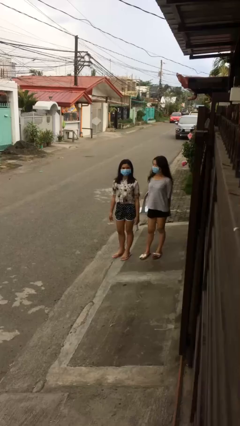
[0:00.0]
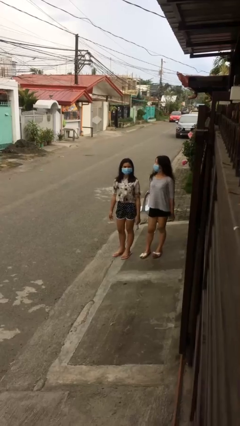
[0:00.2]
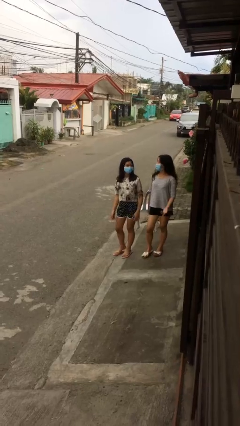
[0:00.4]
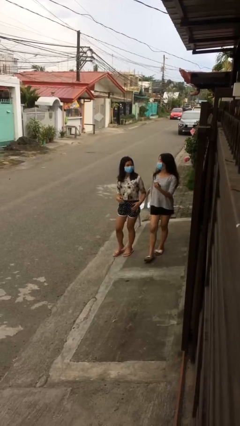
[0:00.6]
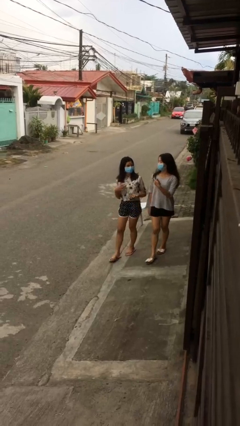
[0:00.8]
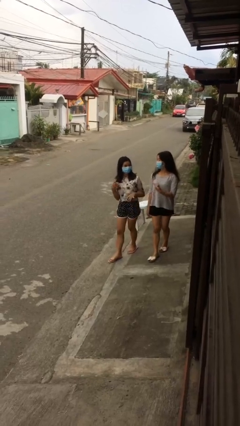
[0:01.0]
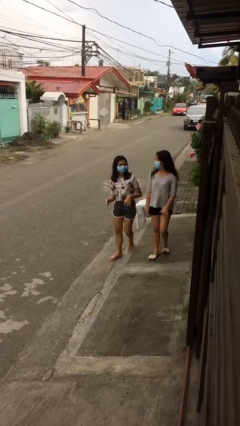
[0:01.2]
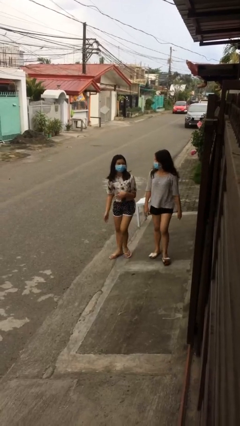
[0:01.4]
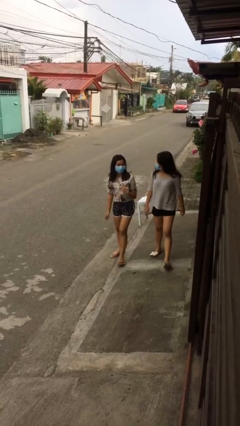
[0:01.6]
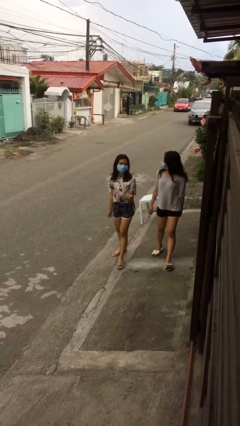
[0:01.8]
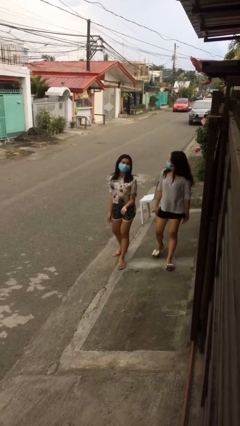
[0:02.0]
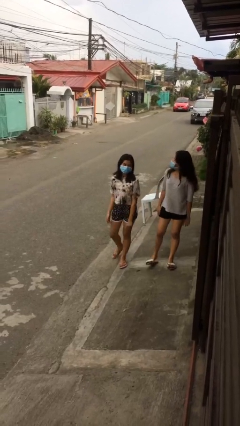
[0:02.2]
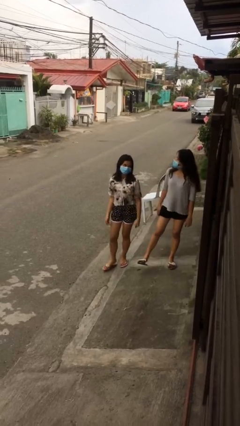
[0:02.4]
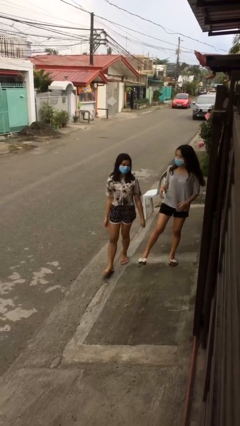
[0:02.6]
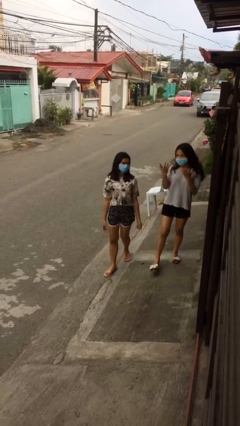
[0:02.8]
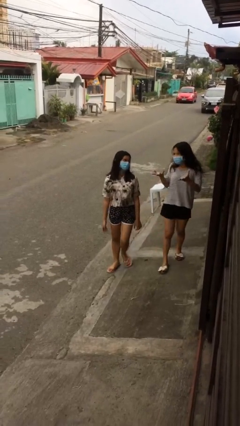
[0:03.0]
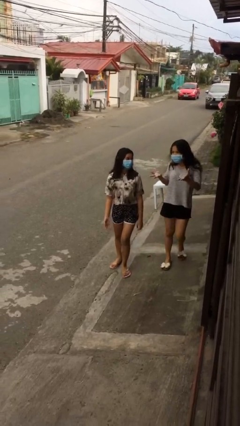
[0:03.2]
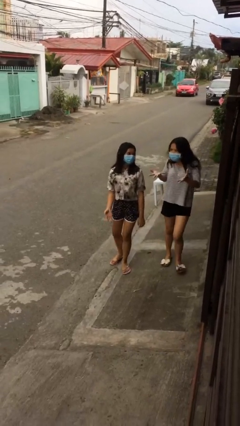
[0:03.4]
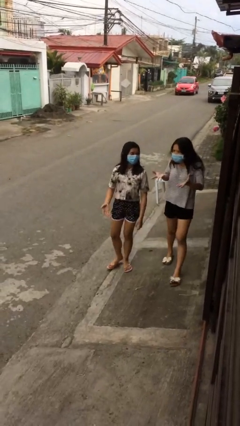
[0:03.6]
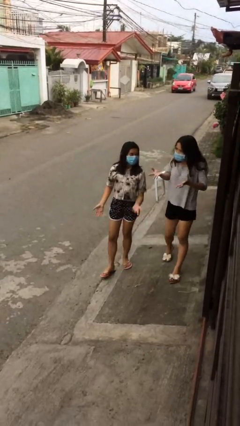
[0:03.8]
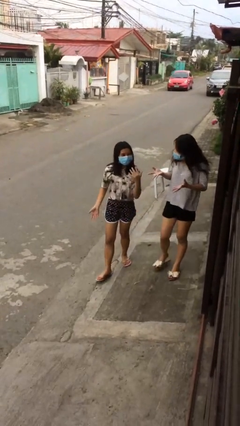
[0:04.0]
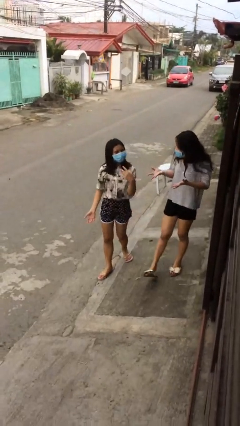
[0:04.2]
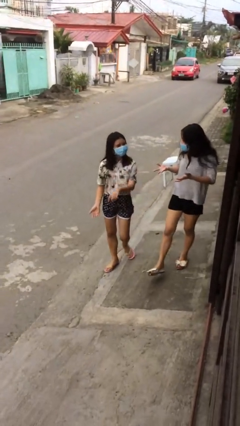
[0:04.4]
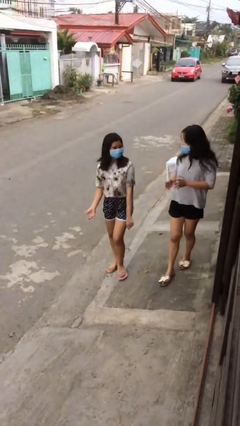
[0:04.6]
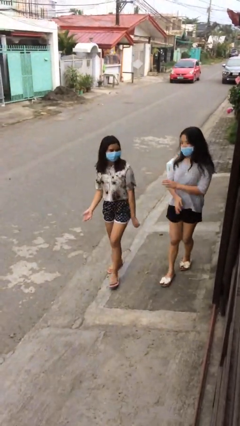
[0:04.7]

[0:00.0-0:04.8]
person talks to person

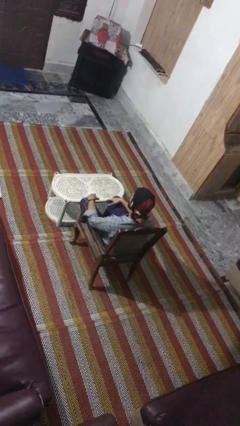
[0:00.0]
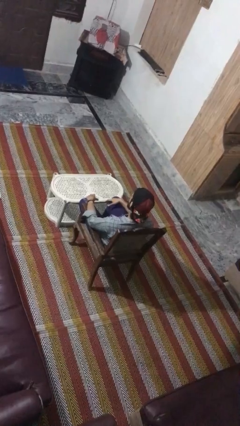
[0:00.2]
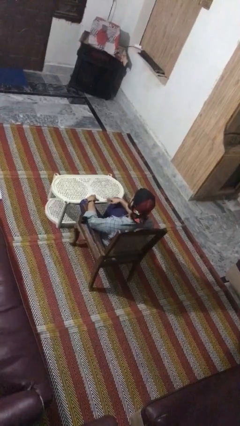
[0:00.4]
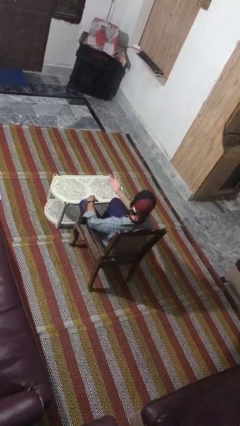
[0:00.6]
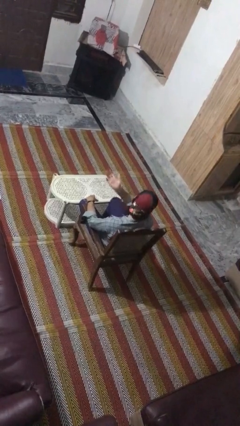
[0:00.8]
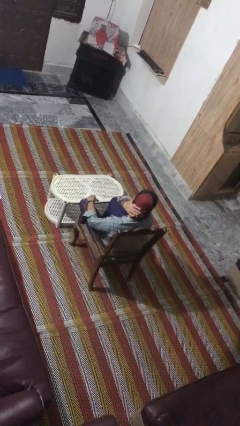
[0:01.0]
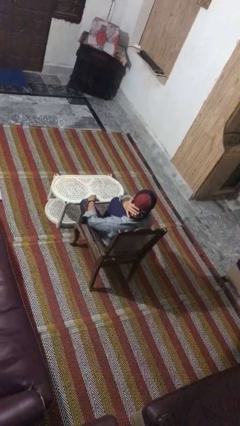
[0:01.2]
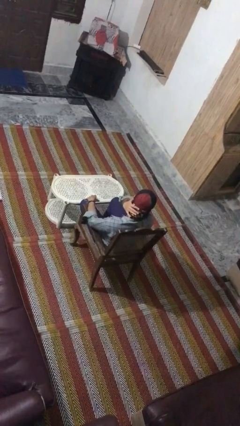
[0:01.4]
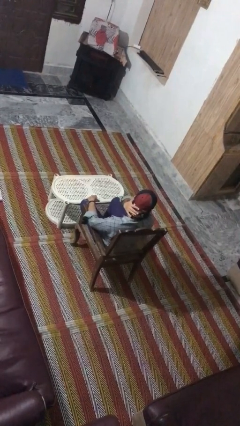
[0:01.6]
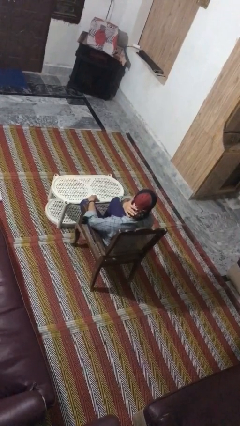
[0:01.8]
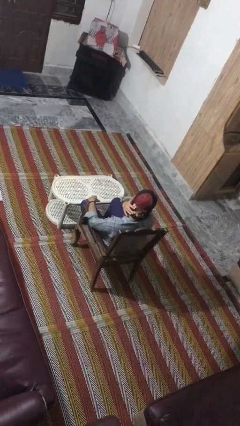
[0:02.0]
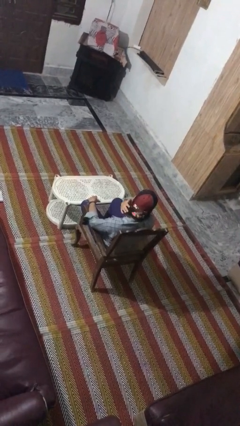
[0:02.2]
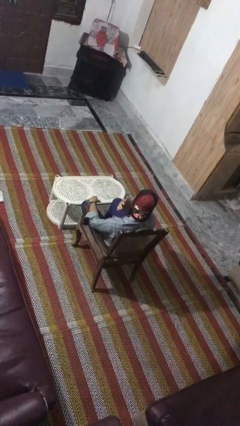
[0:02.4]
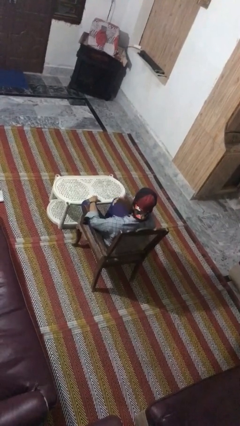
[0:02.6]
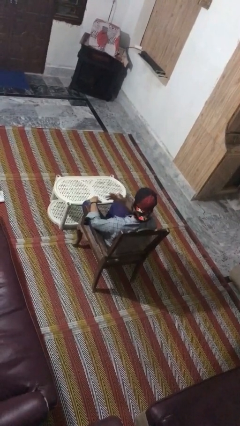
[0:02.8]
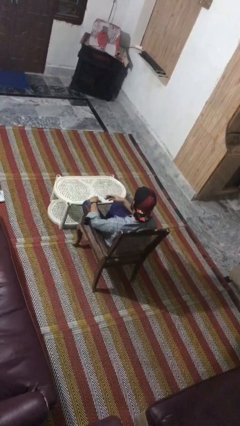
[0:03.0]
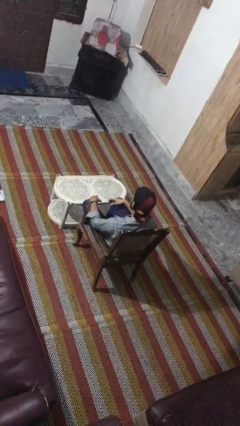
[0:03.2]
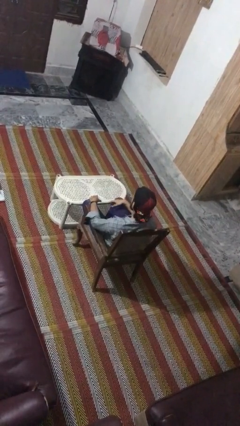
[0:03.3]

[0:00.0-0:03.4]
person swats bug

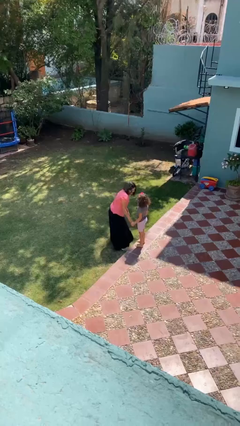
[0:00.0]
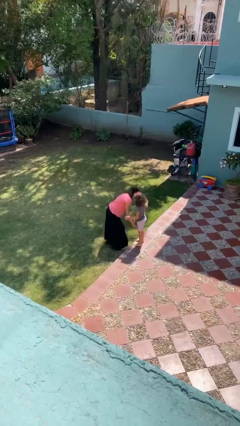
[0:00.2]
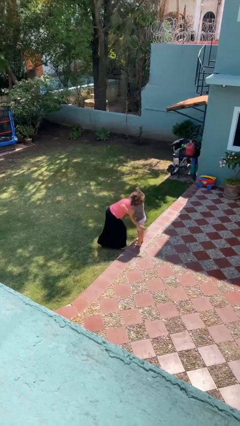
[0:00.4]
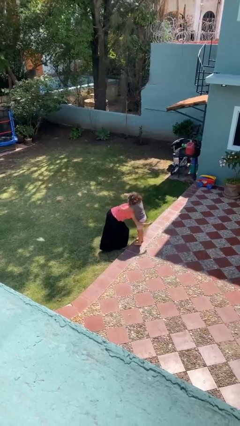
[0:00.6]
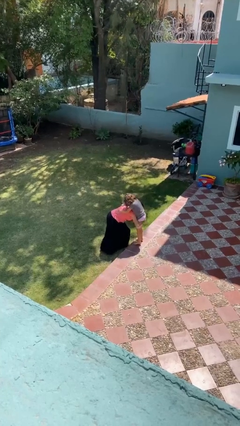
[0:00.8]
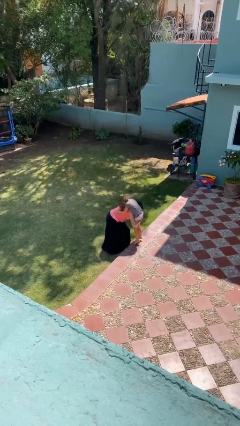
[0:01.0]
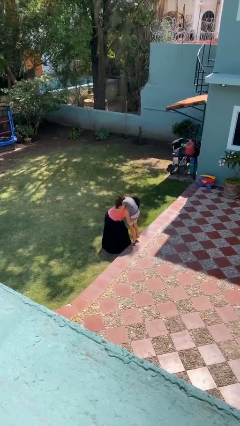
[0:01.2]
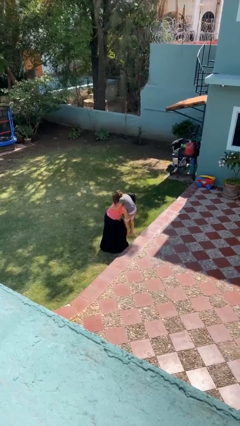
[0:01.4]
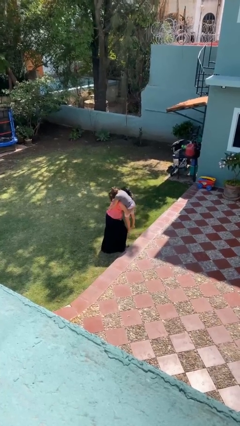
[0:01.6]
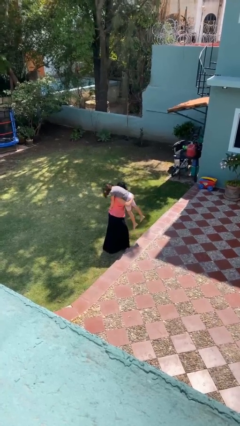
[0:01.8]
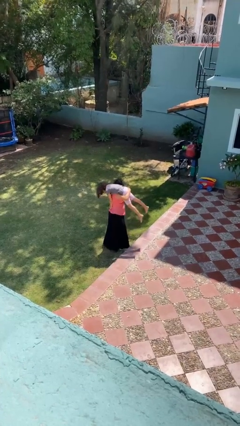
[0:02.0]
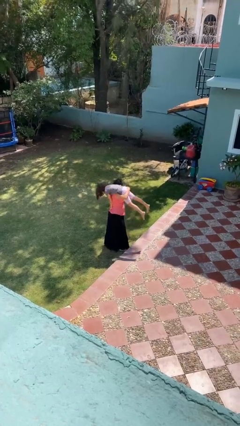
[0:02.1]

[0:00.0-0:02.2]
person carries person over shoulder

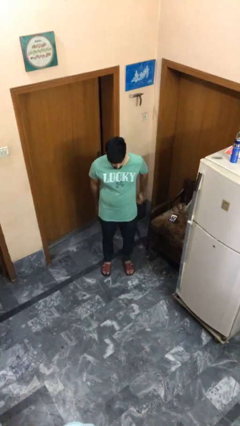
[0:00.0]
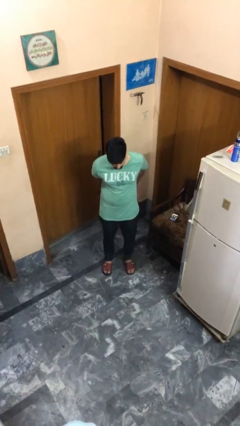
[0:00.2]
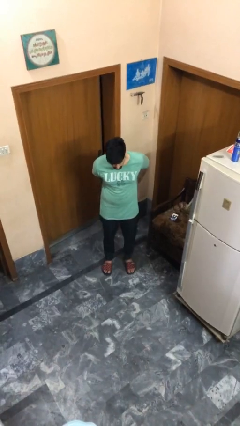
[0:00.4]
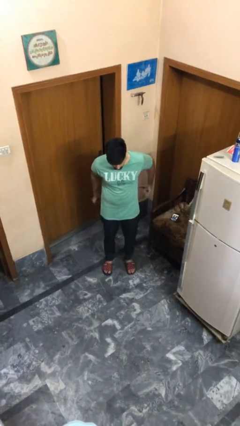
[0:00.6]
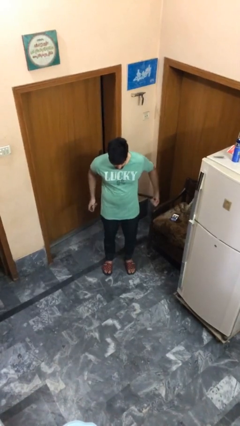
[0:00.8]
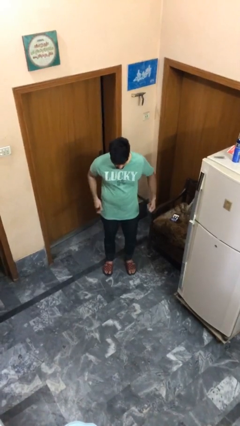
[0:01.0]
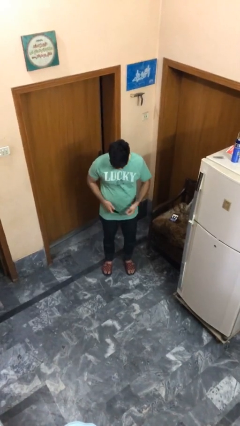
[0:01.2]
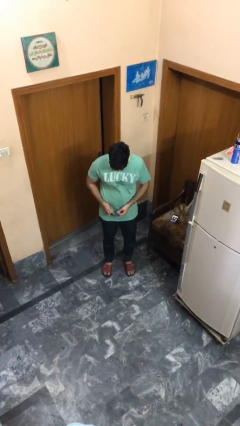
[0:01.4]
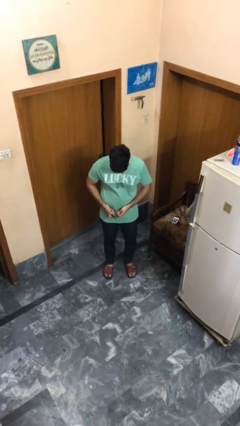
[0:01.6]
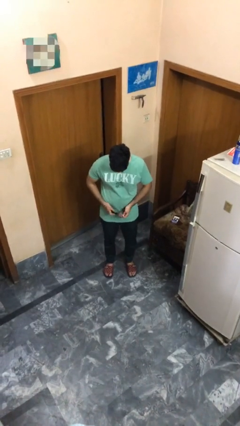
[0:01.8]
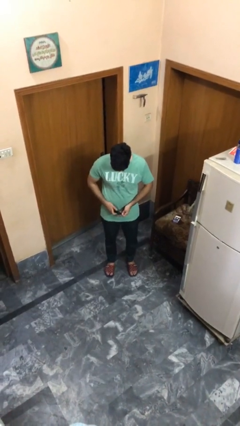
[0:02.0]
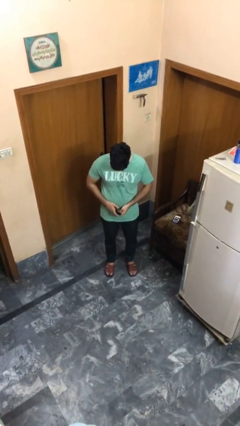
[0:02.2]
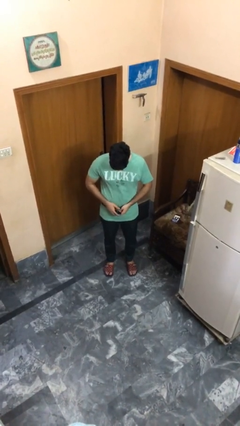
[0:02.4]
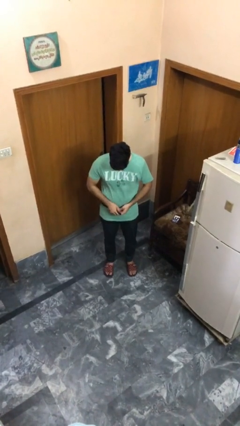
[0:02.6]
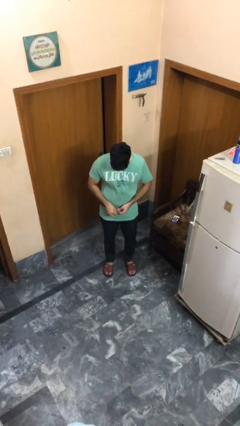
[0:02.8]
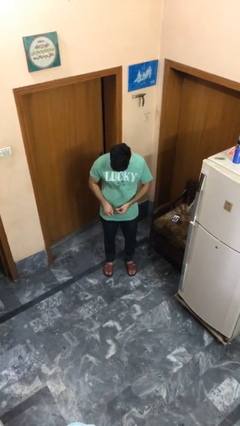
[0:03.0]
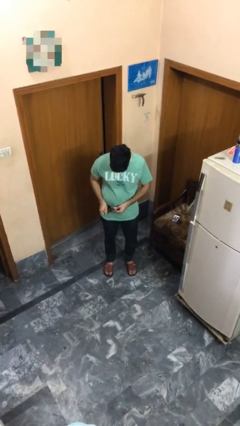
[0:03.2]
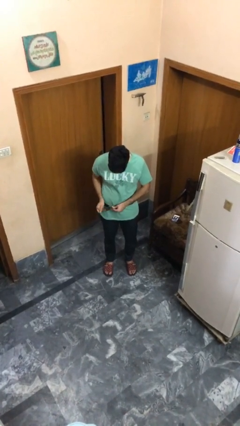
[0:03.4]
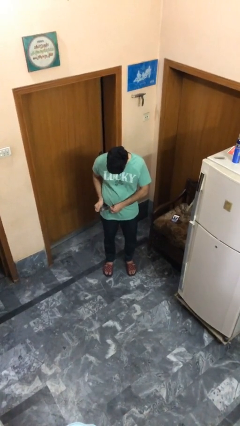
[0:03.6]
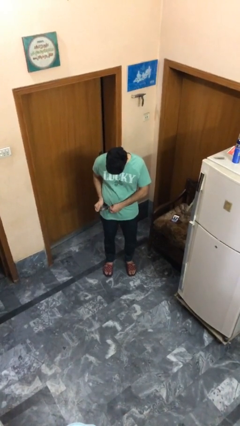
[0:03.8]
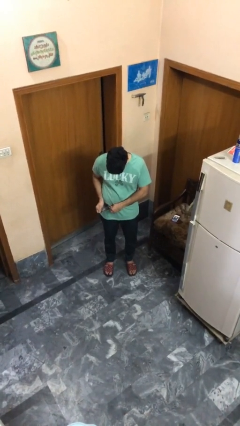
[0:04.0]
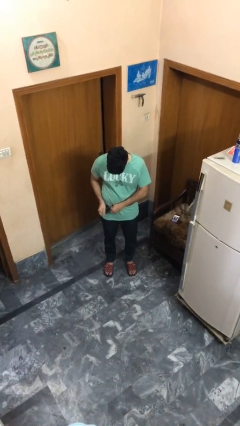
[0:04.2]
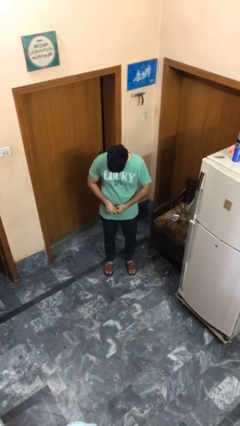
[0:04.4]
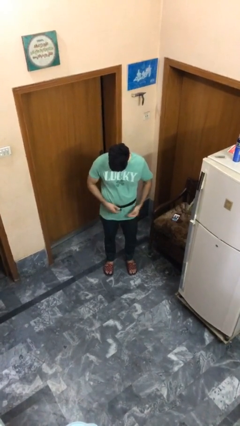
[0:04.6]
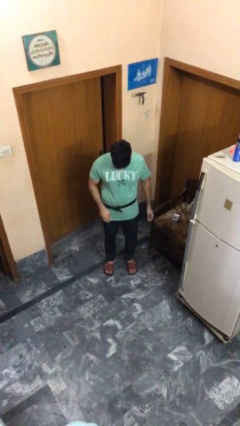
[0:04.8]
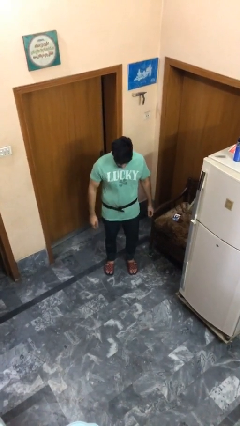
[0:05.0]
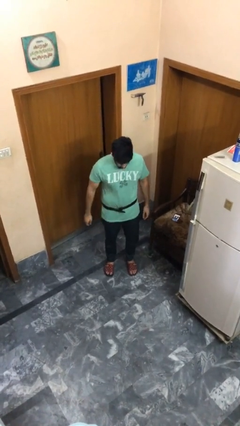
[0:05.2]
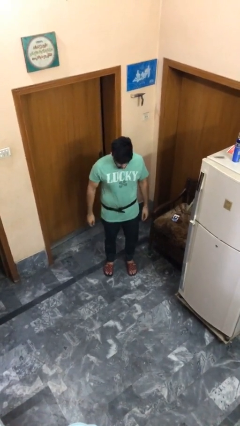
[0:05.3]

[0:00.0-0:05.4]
person puts on belt

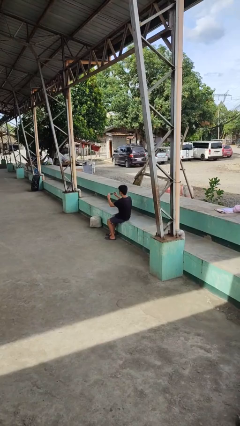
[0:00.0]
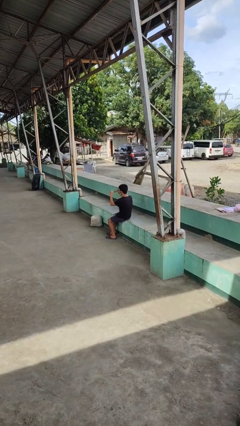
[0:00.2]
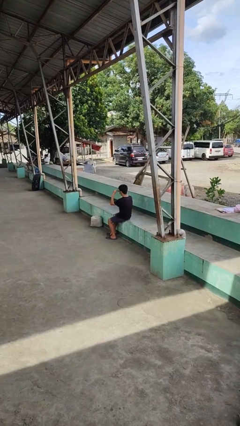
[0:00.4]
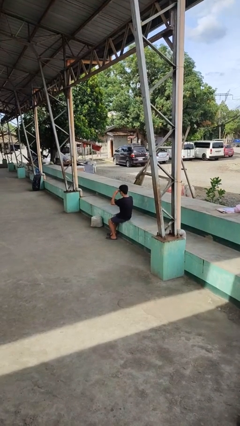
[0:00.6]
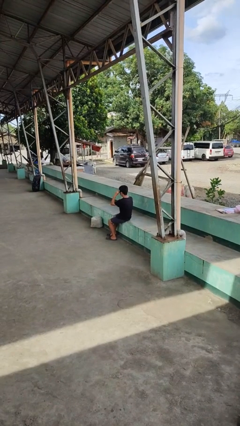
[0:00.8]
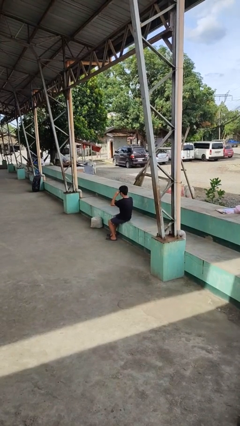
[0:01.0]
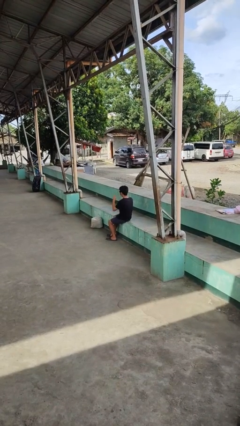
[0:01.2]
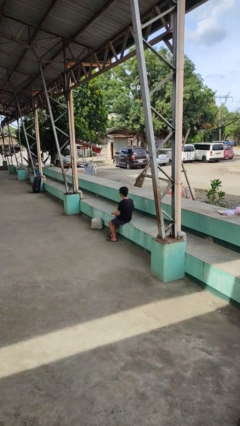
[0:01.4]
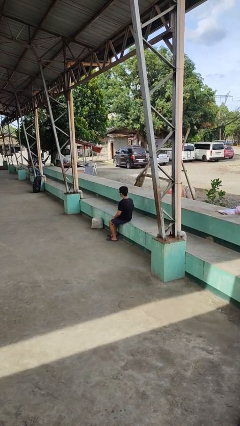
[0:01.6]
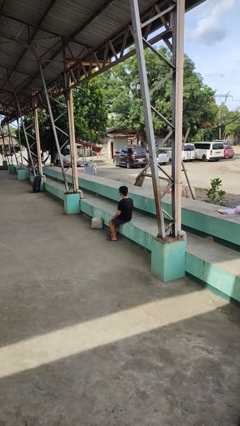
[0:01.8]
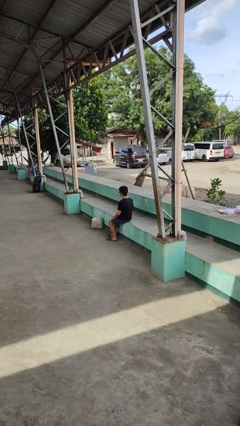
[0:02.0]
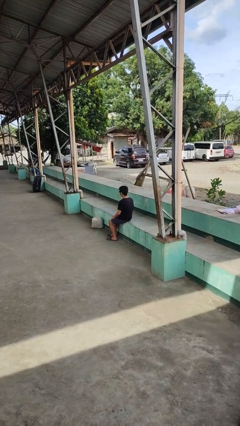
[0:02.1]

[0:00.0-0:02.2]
person puts on sunglasses
